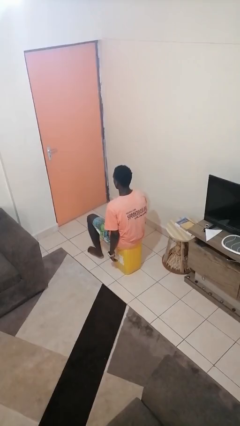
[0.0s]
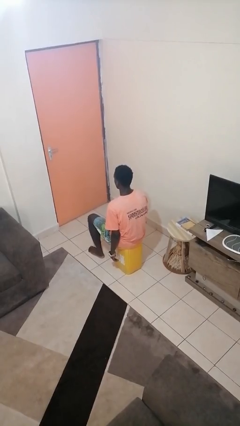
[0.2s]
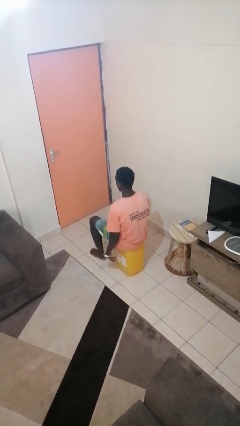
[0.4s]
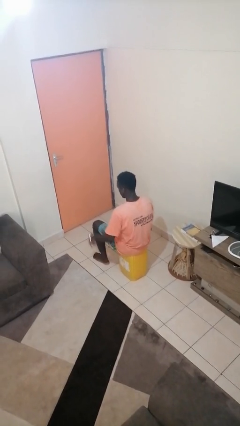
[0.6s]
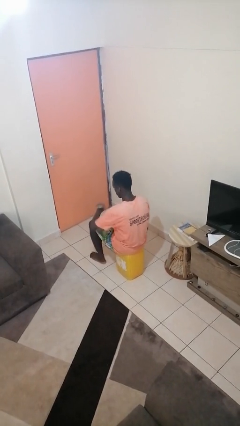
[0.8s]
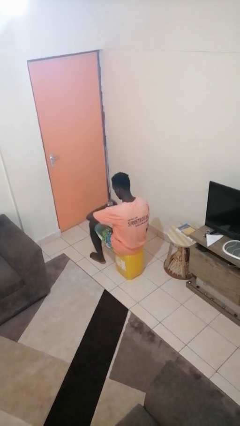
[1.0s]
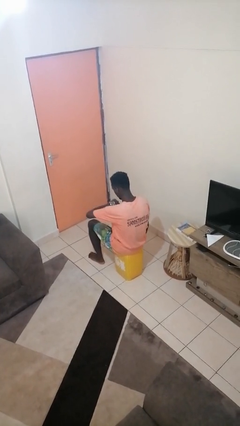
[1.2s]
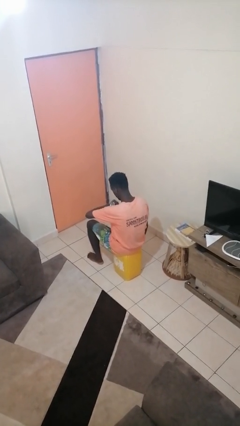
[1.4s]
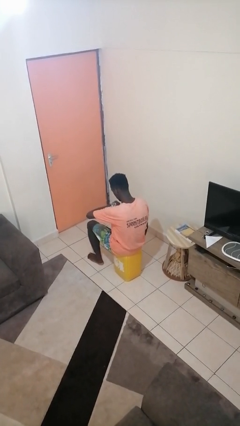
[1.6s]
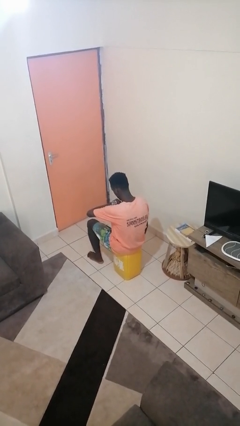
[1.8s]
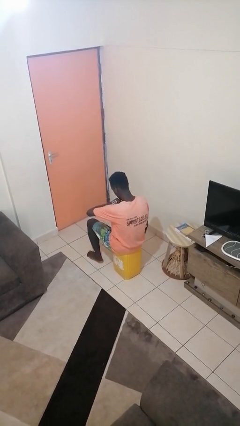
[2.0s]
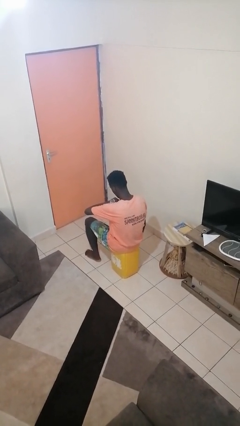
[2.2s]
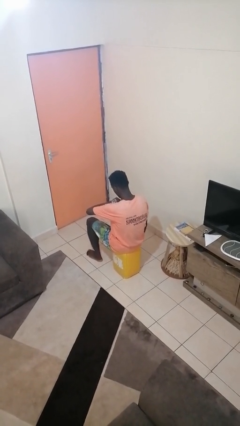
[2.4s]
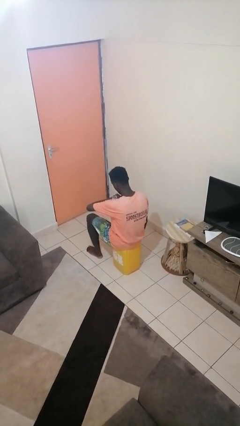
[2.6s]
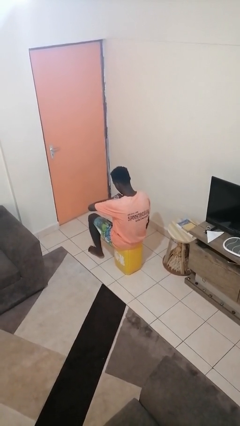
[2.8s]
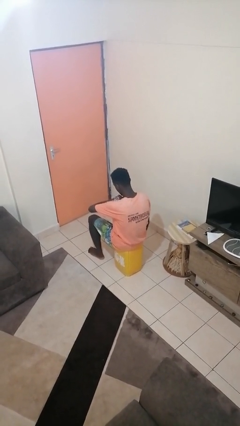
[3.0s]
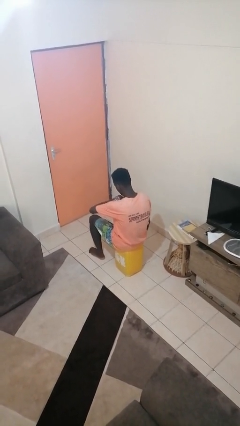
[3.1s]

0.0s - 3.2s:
person looks at wristwatch

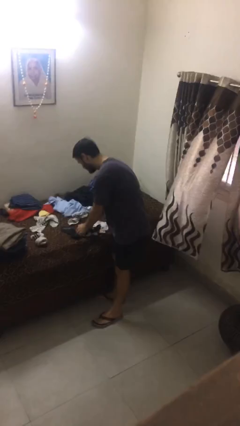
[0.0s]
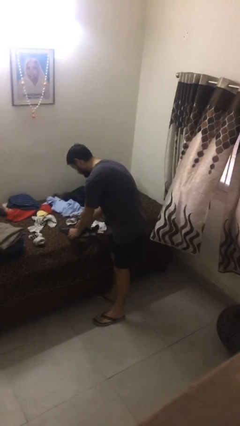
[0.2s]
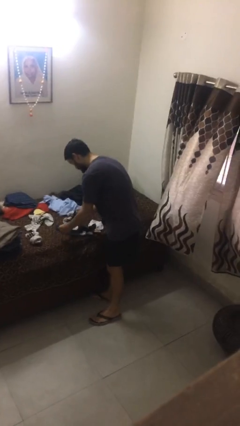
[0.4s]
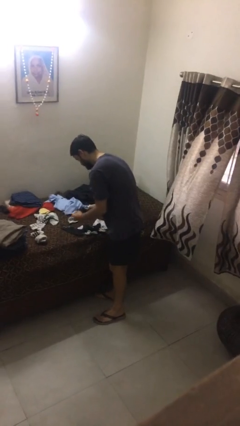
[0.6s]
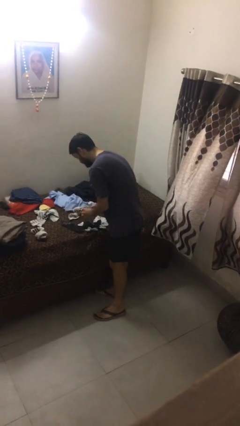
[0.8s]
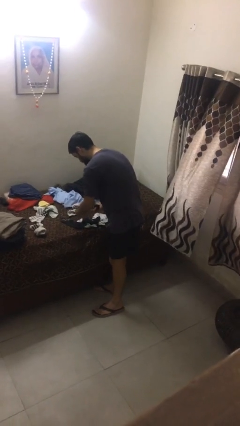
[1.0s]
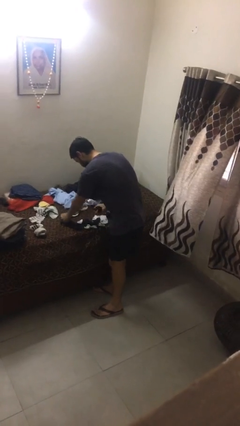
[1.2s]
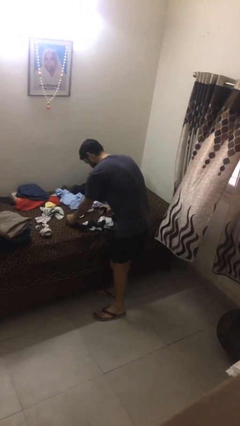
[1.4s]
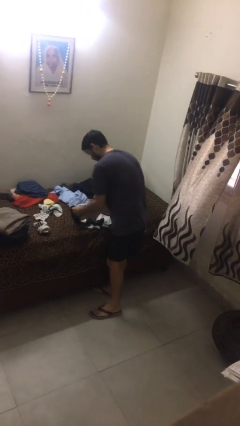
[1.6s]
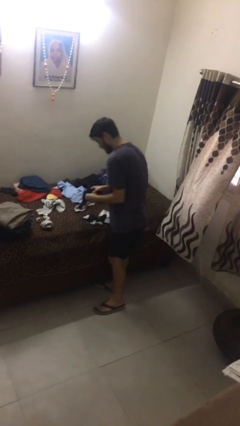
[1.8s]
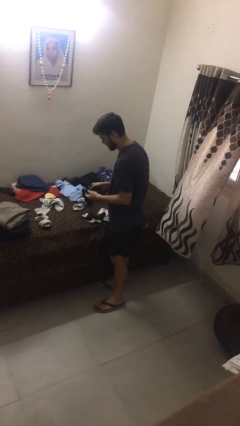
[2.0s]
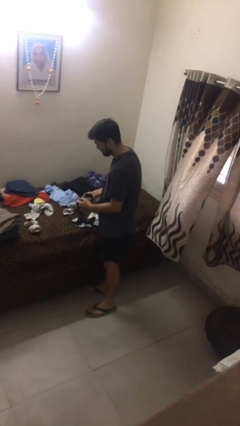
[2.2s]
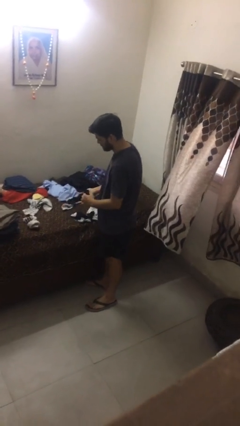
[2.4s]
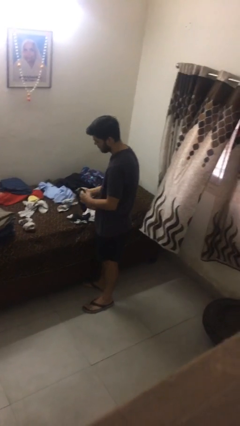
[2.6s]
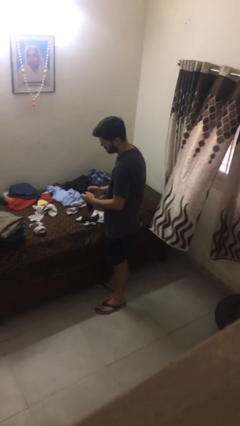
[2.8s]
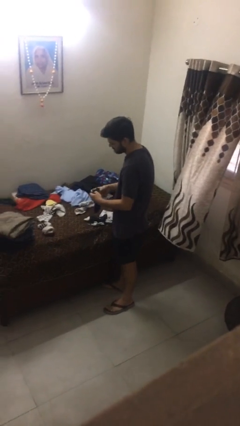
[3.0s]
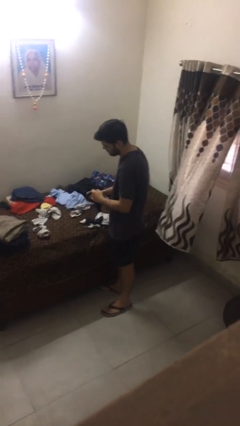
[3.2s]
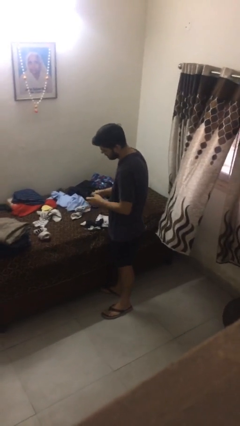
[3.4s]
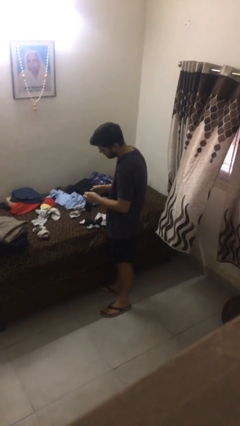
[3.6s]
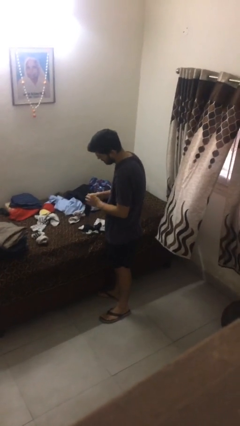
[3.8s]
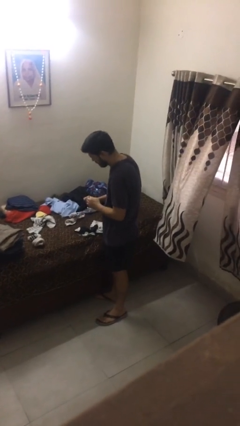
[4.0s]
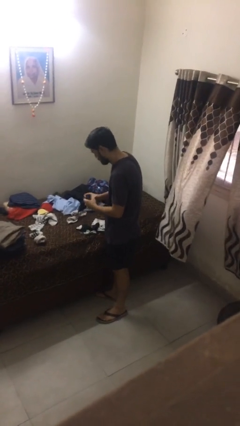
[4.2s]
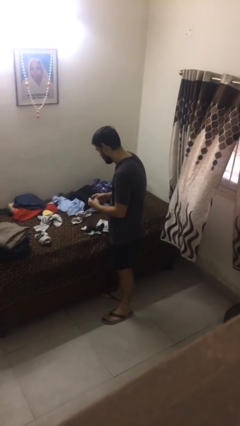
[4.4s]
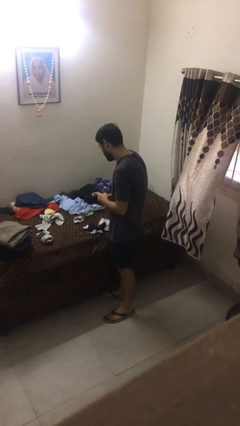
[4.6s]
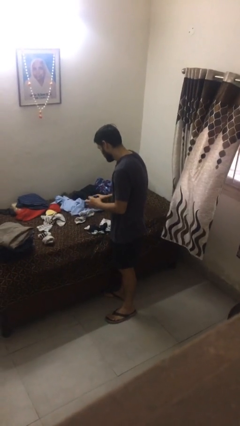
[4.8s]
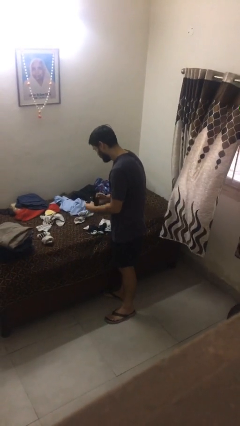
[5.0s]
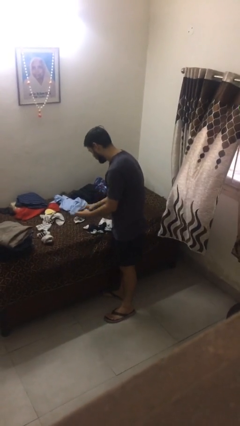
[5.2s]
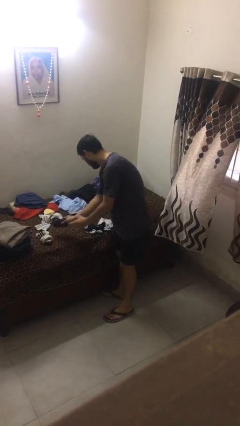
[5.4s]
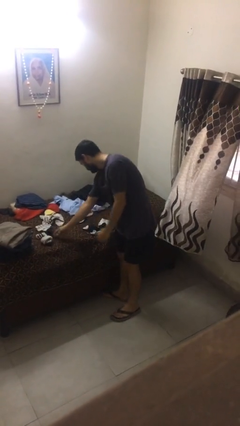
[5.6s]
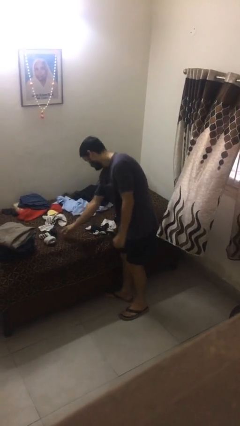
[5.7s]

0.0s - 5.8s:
person folds socks

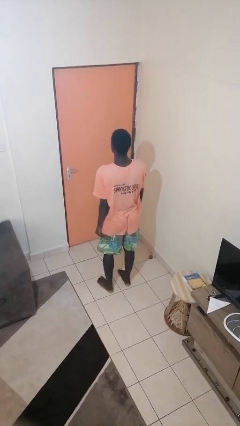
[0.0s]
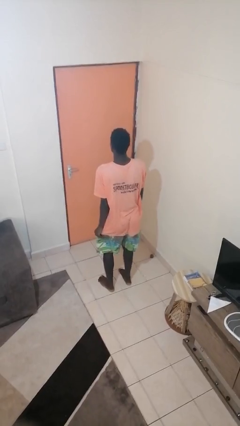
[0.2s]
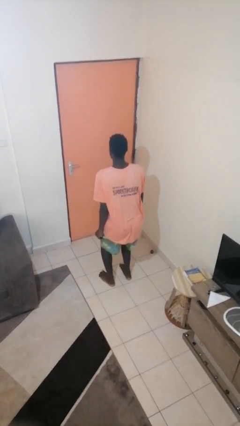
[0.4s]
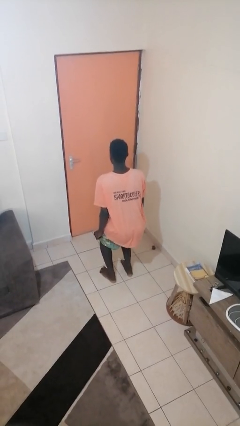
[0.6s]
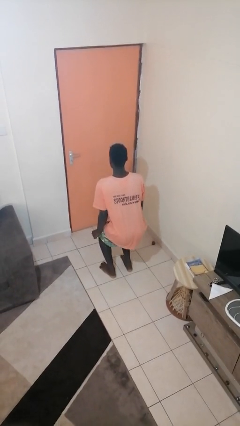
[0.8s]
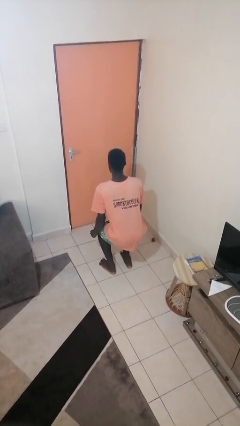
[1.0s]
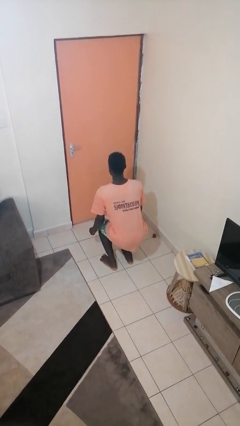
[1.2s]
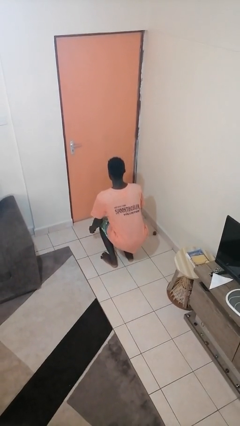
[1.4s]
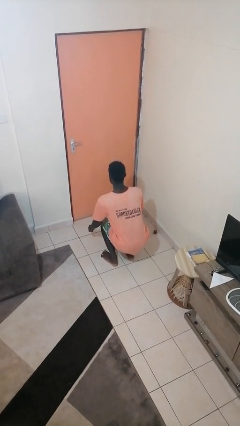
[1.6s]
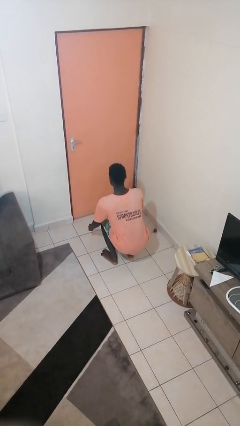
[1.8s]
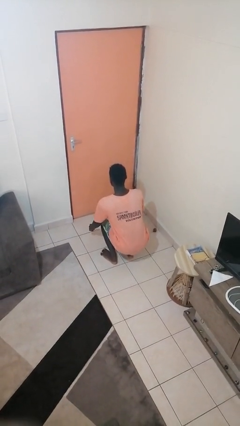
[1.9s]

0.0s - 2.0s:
person squats

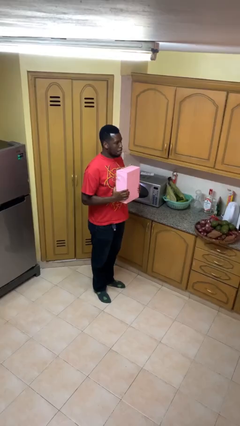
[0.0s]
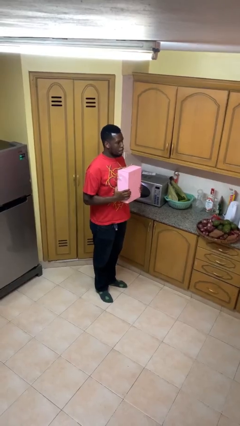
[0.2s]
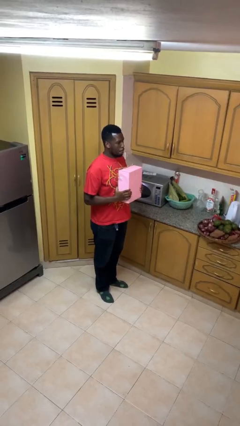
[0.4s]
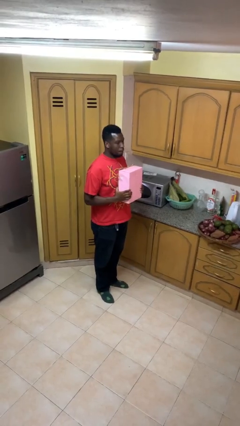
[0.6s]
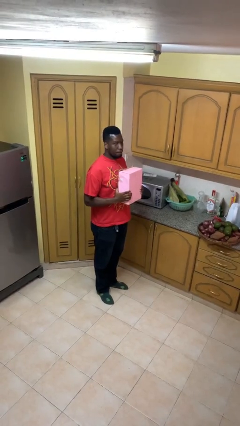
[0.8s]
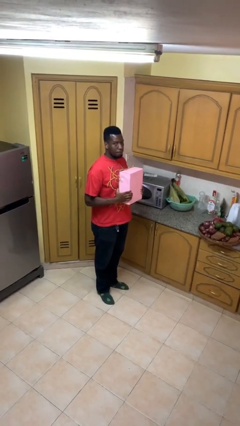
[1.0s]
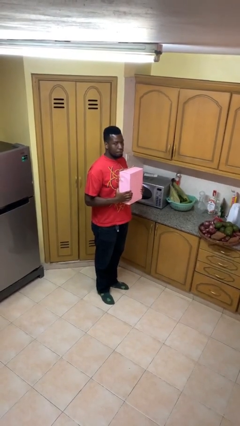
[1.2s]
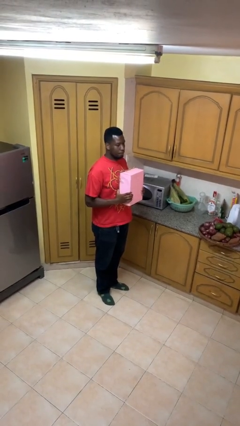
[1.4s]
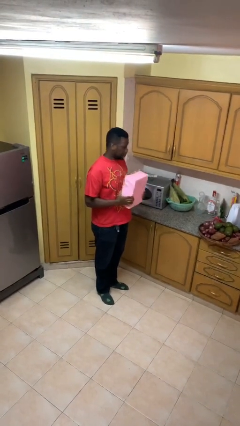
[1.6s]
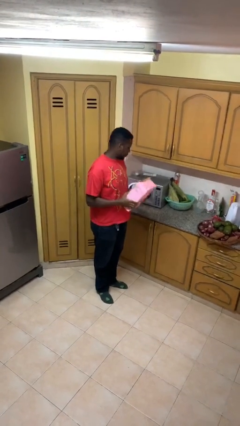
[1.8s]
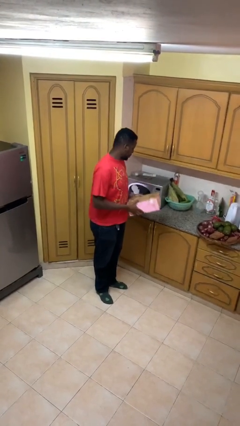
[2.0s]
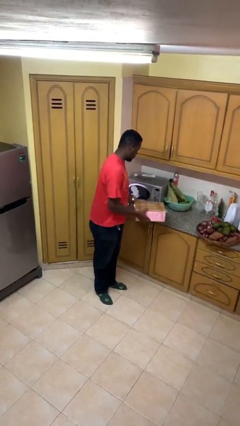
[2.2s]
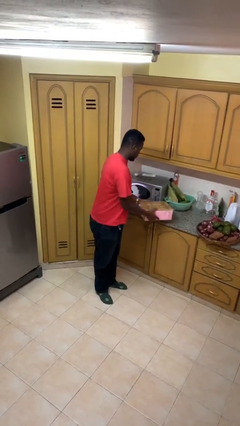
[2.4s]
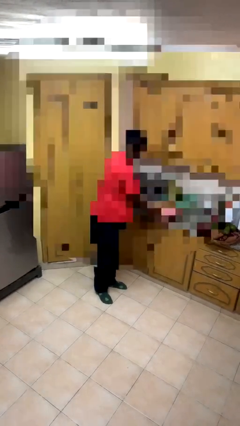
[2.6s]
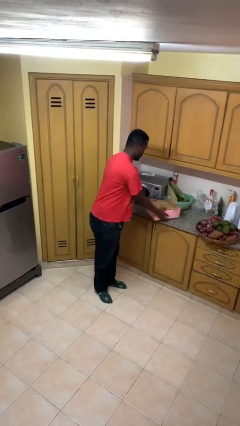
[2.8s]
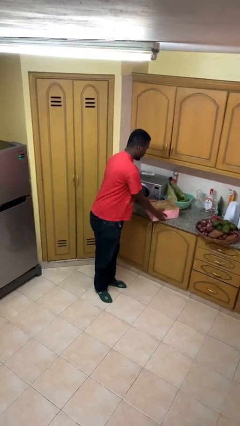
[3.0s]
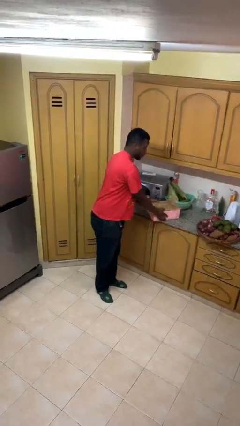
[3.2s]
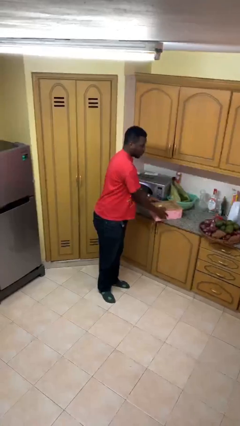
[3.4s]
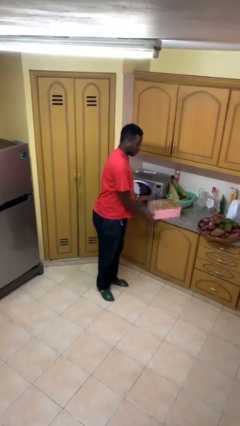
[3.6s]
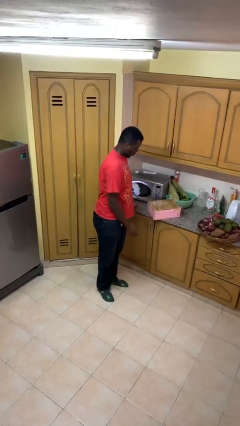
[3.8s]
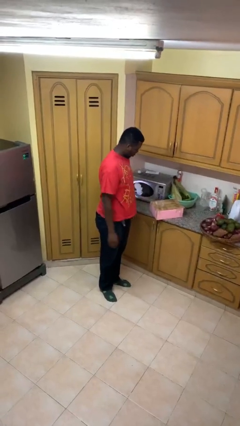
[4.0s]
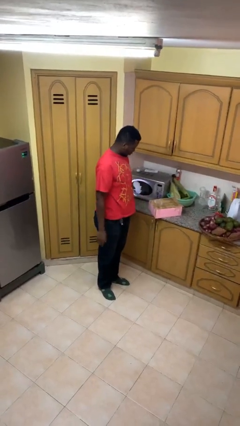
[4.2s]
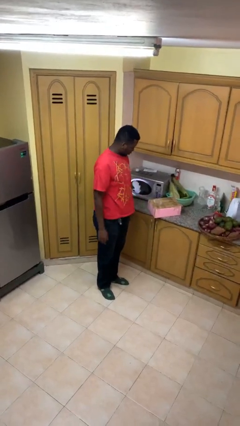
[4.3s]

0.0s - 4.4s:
person puts down object on table

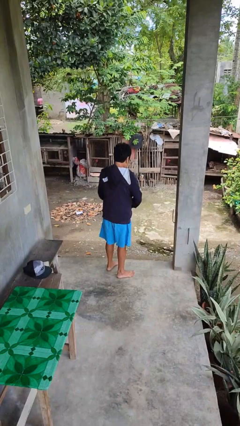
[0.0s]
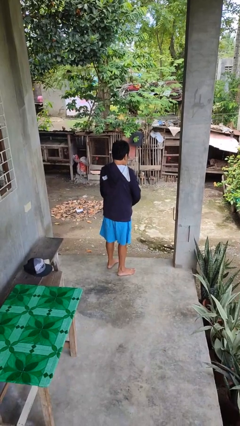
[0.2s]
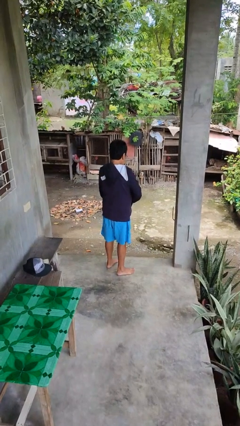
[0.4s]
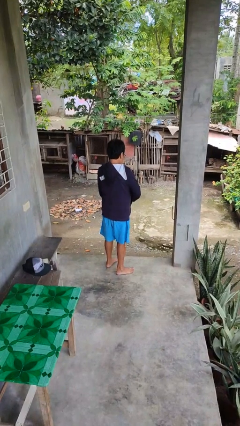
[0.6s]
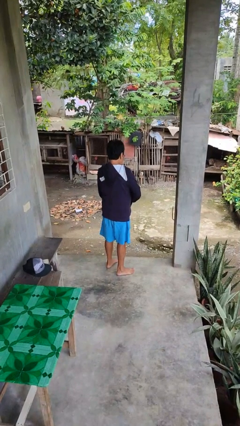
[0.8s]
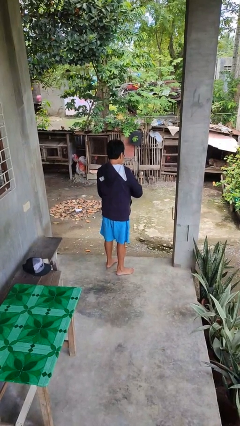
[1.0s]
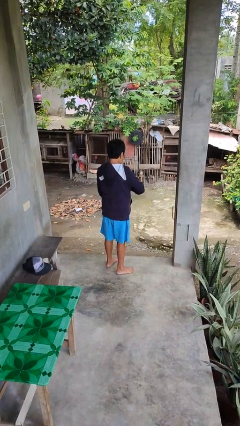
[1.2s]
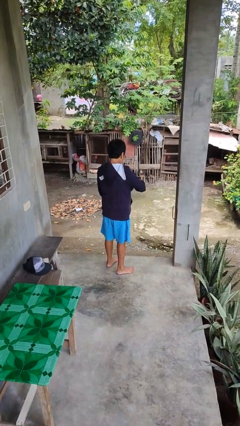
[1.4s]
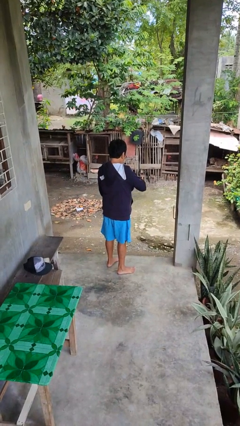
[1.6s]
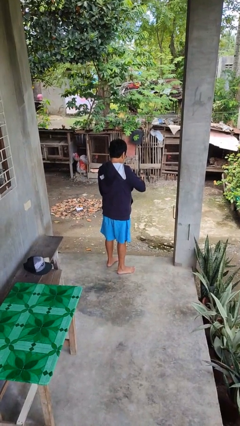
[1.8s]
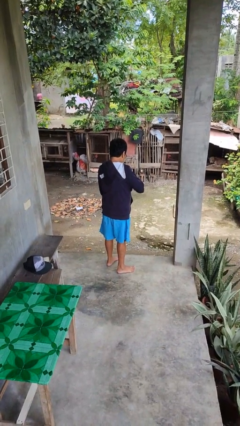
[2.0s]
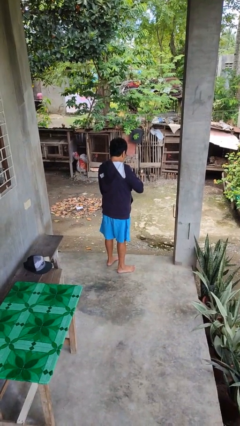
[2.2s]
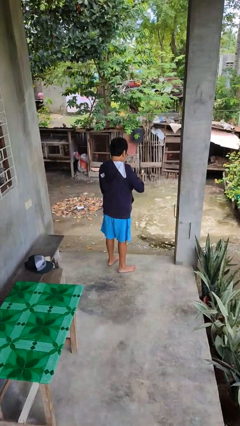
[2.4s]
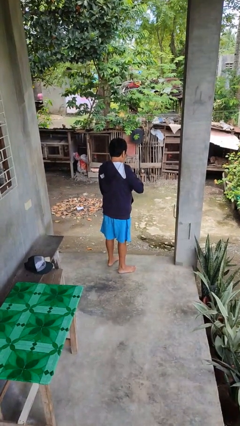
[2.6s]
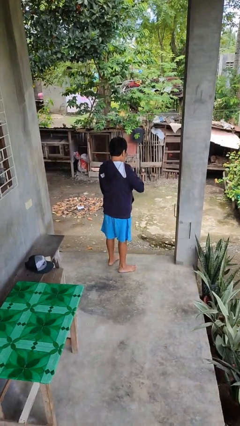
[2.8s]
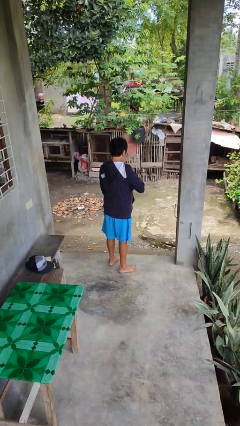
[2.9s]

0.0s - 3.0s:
person zips up jacket
